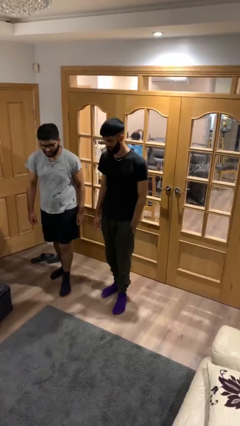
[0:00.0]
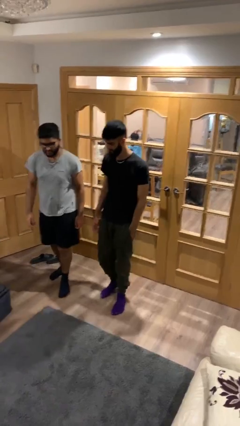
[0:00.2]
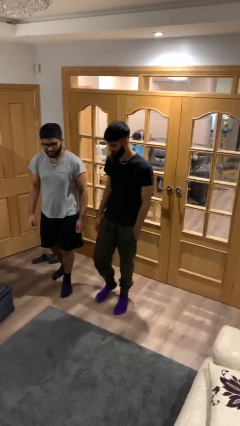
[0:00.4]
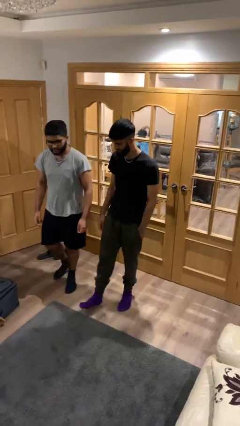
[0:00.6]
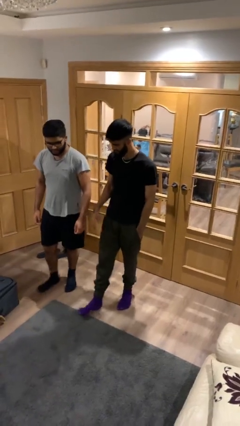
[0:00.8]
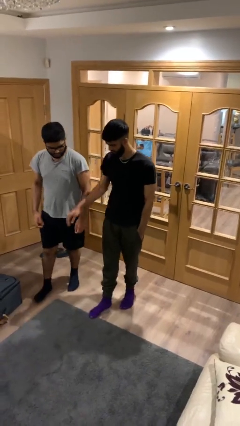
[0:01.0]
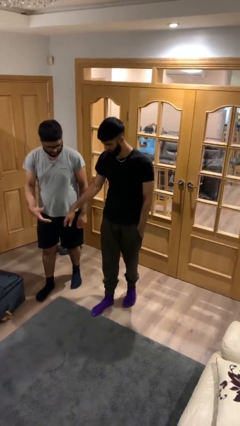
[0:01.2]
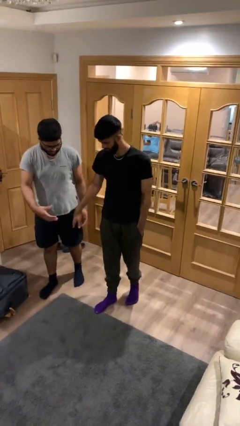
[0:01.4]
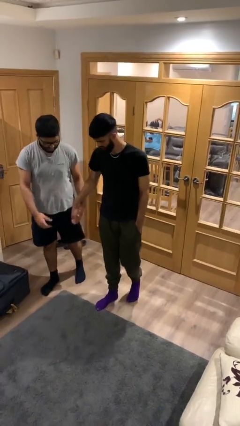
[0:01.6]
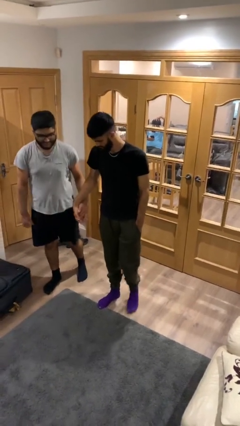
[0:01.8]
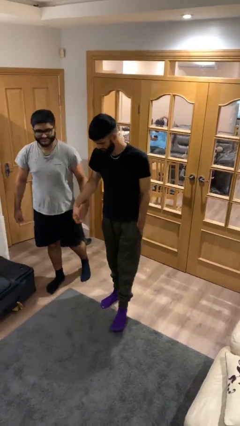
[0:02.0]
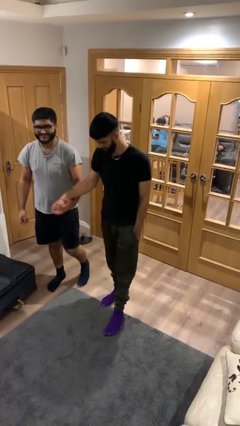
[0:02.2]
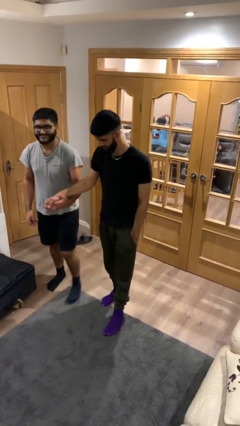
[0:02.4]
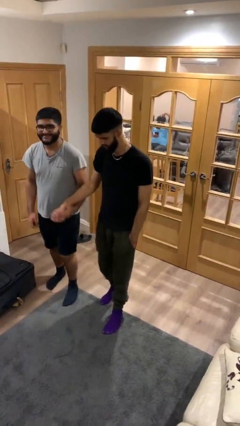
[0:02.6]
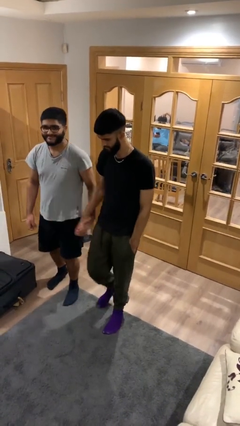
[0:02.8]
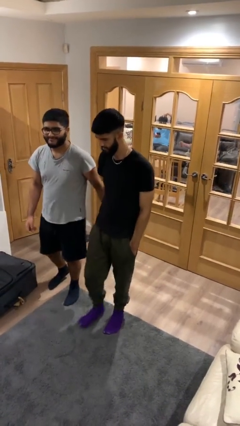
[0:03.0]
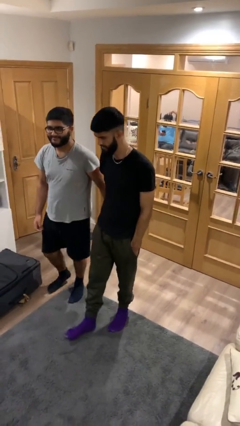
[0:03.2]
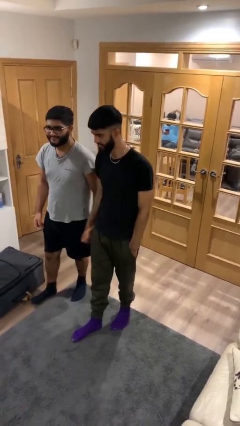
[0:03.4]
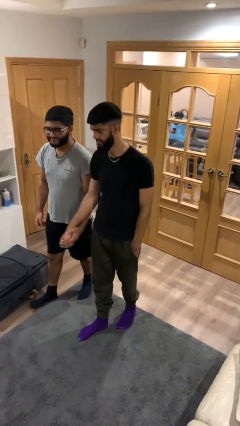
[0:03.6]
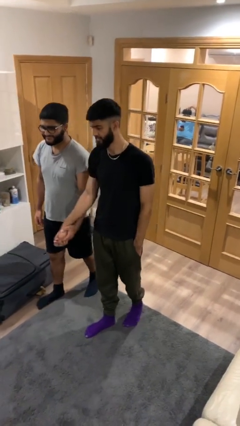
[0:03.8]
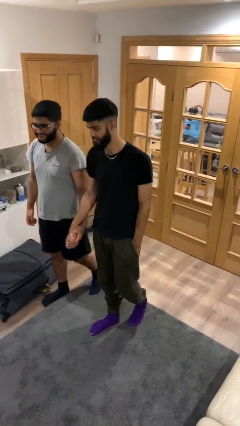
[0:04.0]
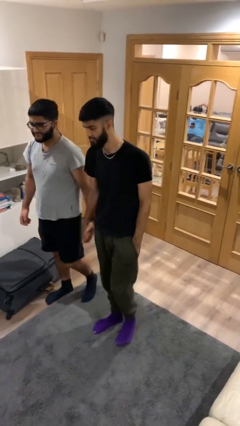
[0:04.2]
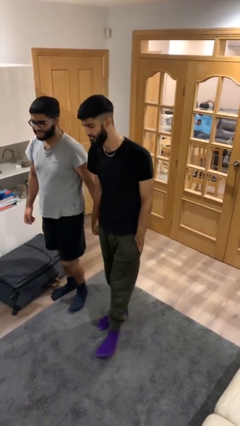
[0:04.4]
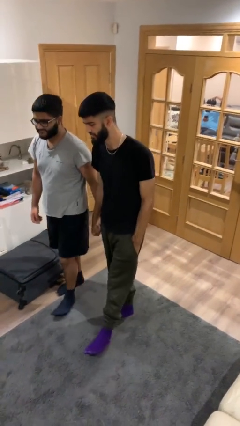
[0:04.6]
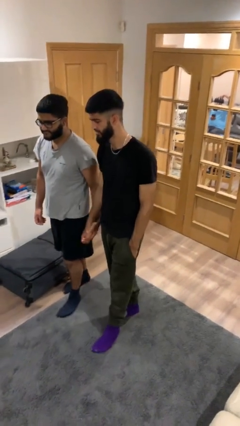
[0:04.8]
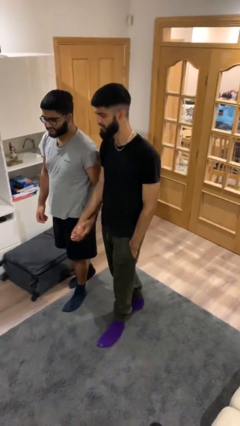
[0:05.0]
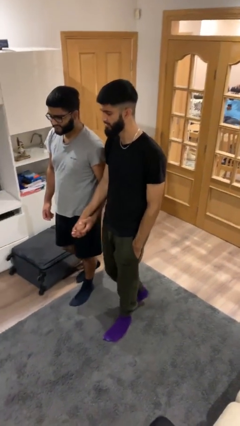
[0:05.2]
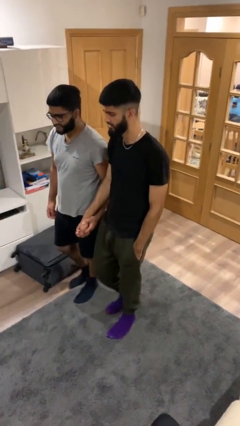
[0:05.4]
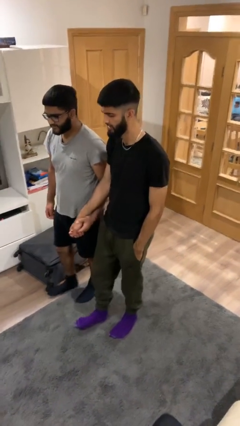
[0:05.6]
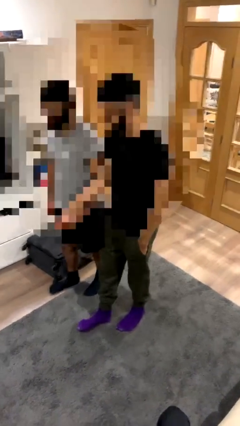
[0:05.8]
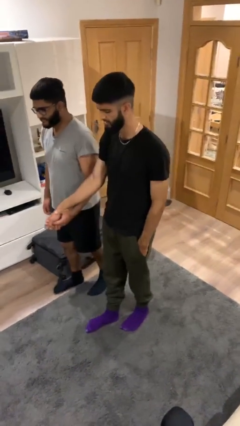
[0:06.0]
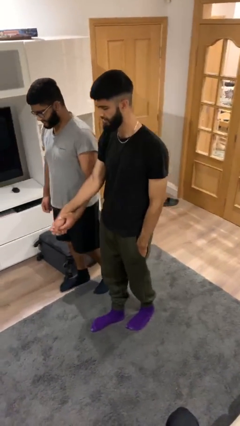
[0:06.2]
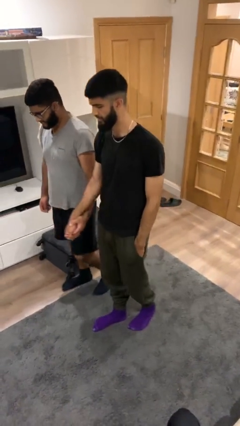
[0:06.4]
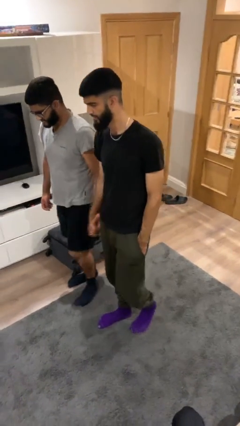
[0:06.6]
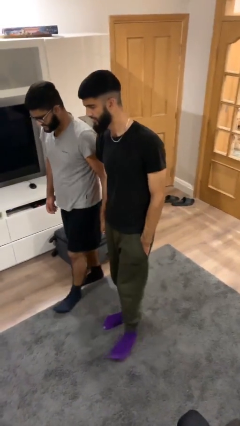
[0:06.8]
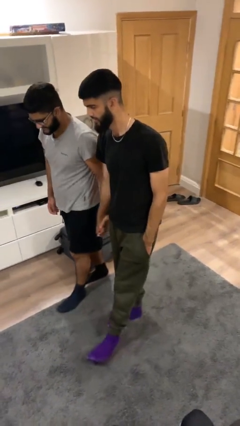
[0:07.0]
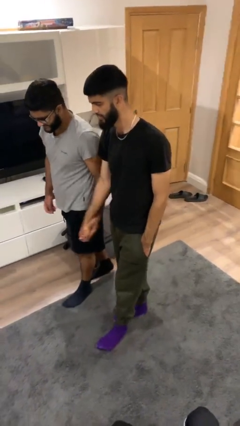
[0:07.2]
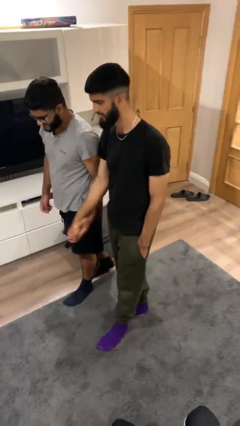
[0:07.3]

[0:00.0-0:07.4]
person holds hand

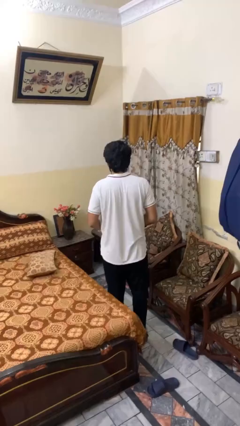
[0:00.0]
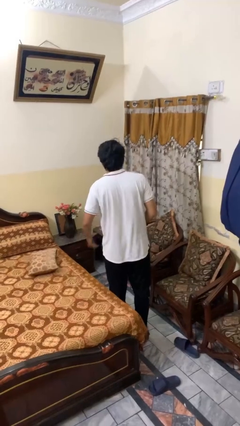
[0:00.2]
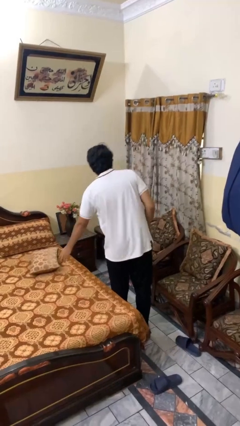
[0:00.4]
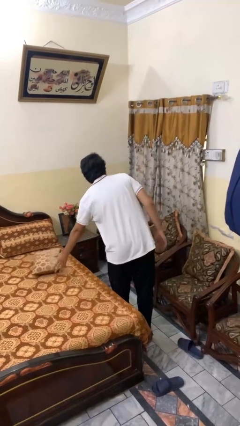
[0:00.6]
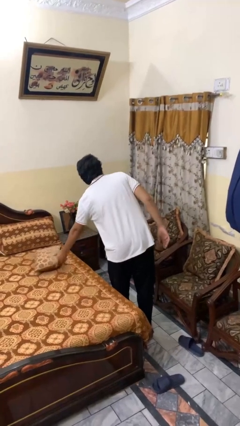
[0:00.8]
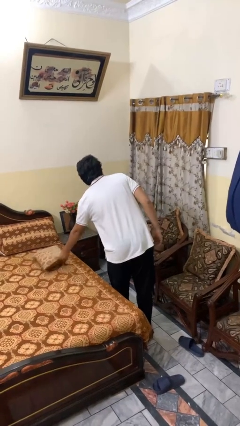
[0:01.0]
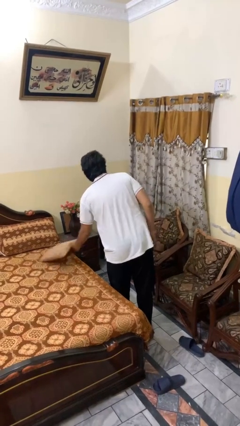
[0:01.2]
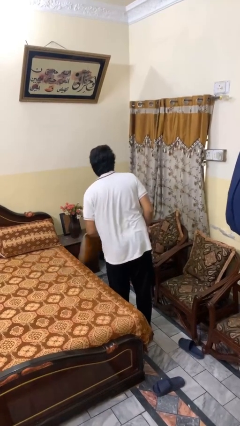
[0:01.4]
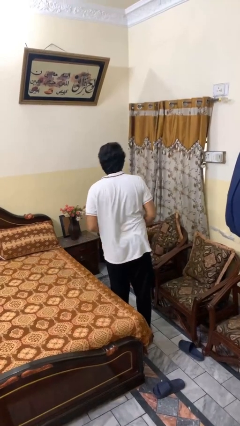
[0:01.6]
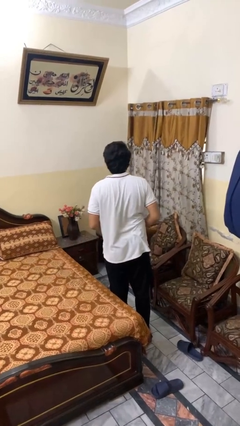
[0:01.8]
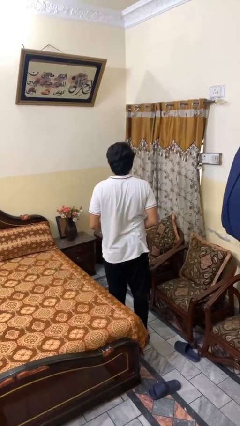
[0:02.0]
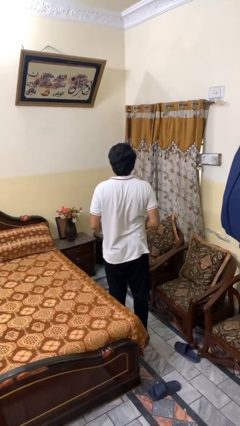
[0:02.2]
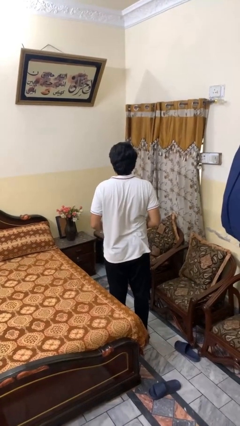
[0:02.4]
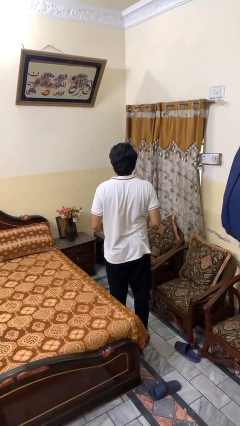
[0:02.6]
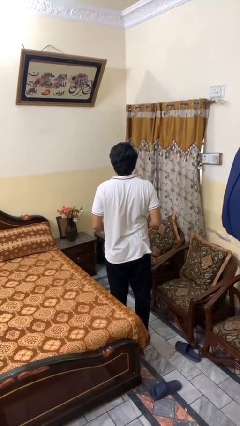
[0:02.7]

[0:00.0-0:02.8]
person picks up object from bed

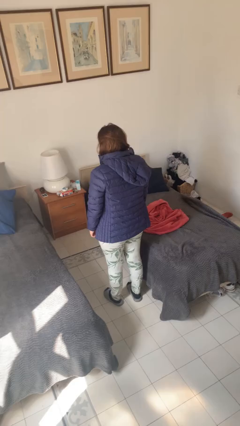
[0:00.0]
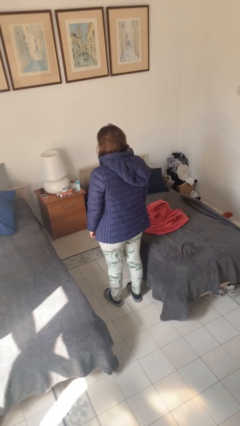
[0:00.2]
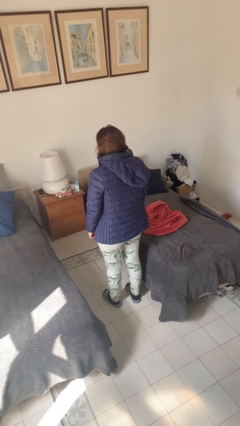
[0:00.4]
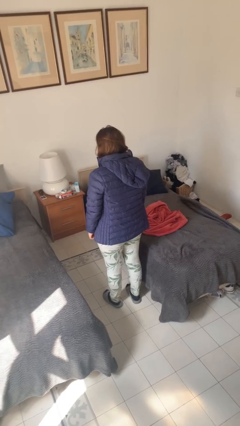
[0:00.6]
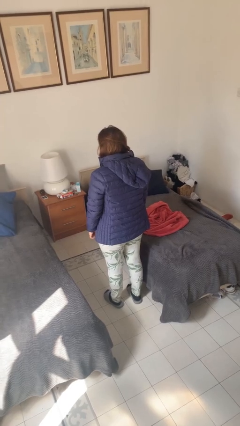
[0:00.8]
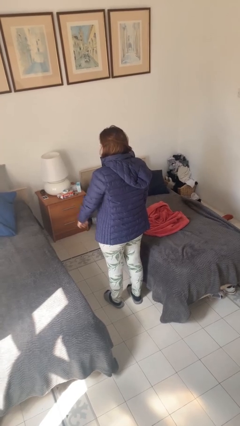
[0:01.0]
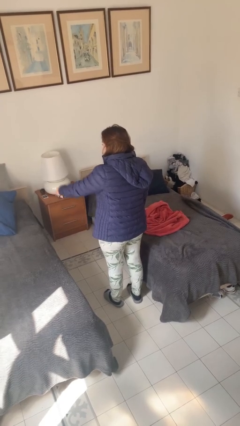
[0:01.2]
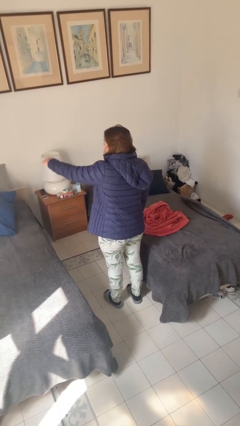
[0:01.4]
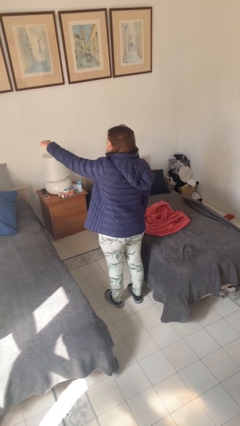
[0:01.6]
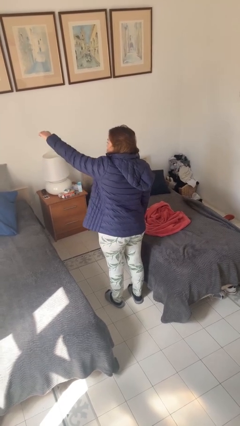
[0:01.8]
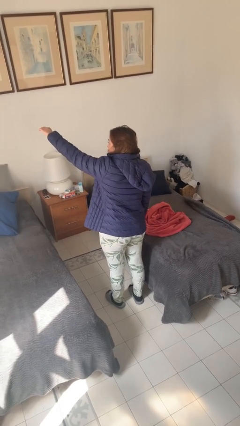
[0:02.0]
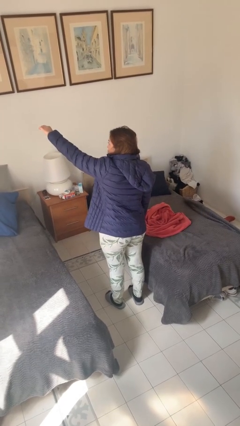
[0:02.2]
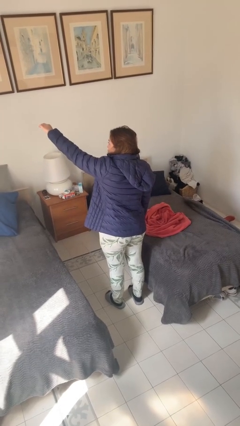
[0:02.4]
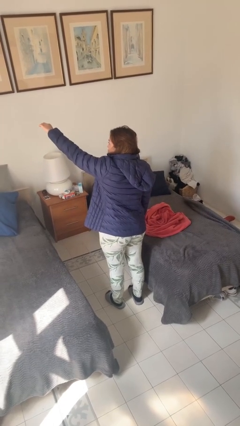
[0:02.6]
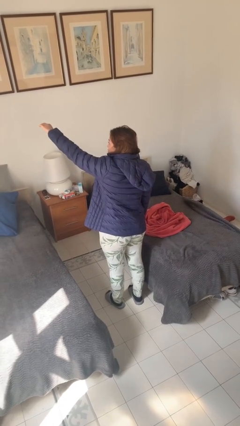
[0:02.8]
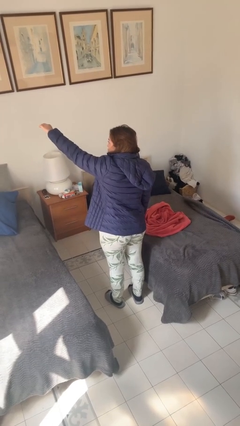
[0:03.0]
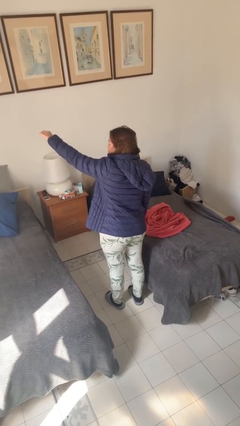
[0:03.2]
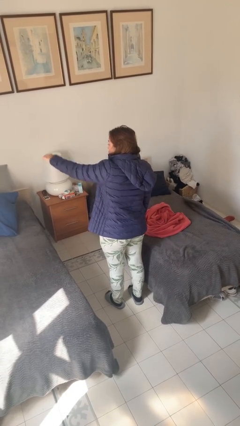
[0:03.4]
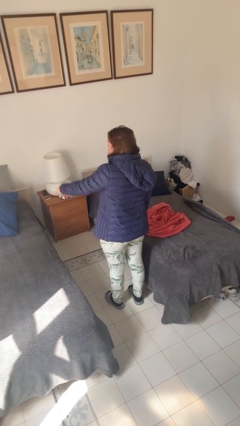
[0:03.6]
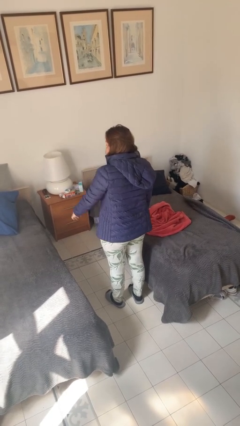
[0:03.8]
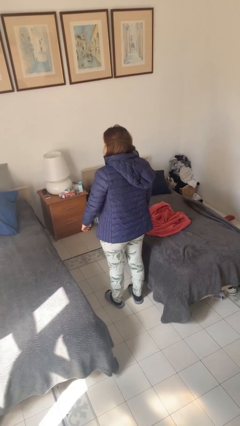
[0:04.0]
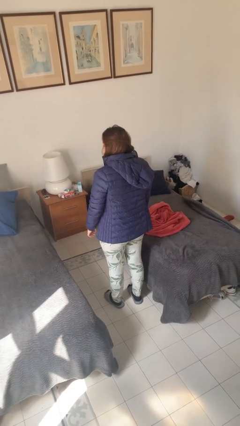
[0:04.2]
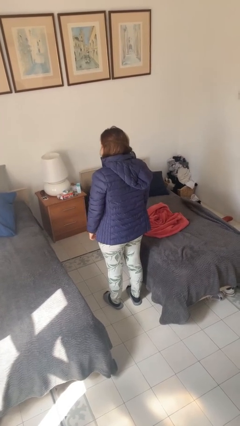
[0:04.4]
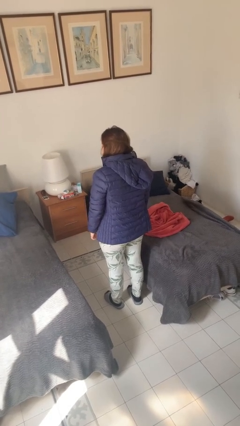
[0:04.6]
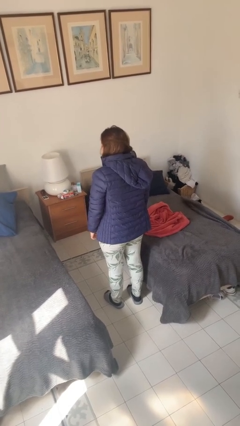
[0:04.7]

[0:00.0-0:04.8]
person gestures hang loose

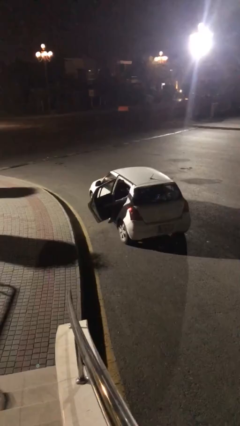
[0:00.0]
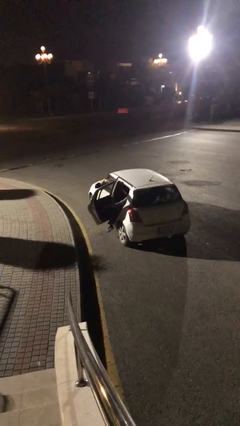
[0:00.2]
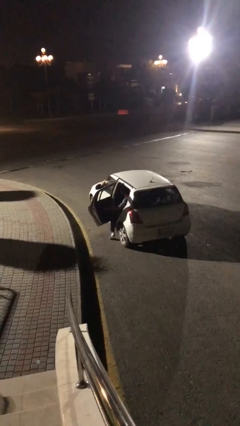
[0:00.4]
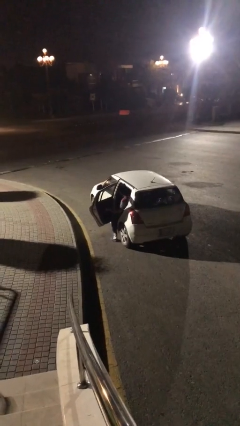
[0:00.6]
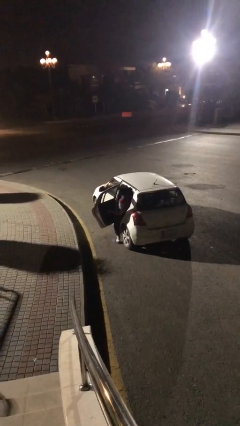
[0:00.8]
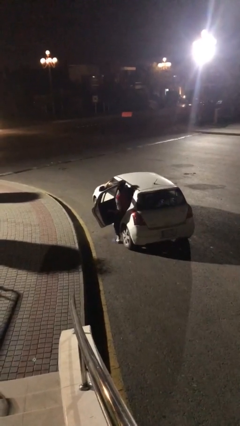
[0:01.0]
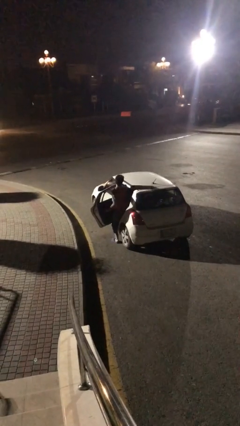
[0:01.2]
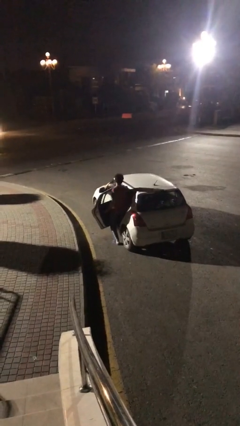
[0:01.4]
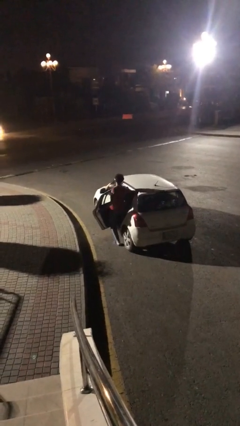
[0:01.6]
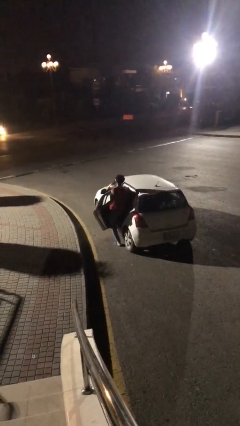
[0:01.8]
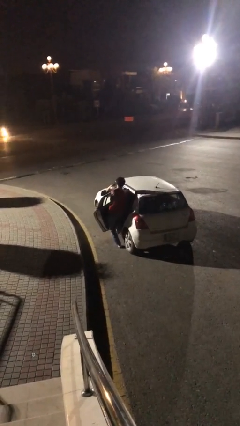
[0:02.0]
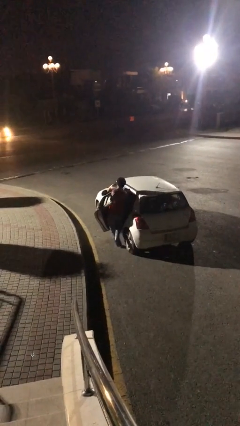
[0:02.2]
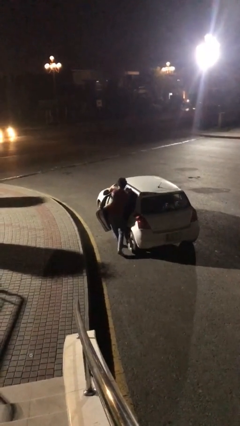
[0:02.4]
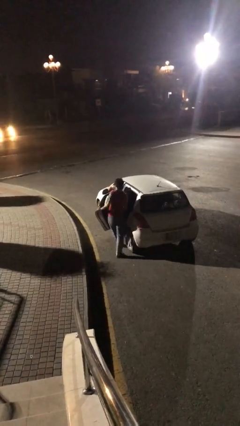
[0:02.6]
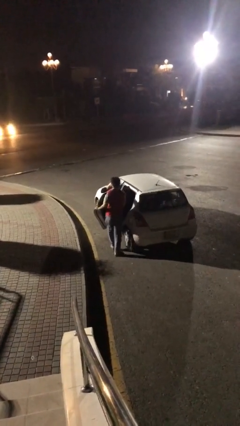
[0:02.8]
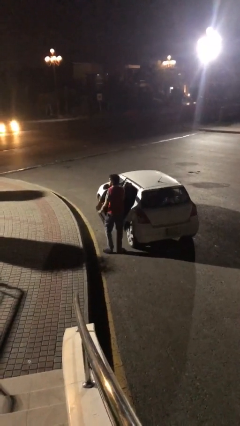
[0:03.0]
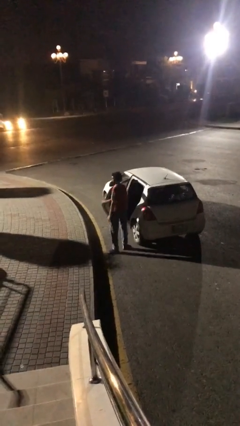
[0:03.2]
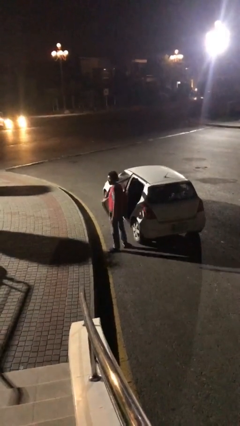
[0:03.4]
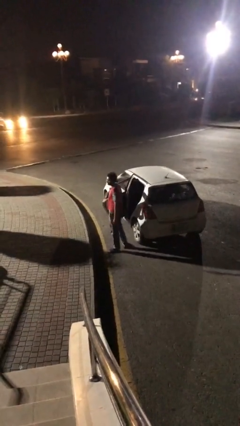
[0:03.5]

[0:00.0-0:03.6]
person exits car
